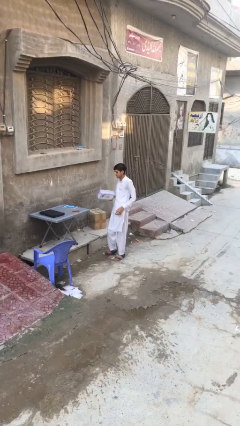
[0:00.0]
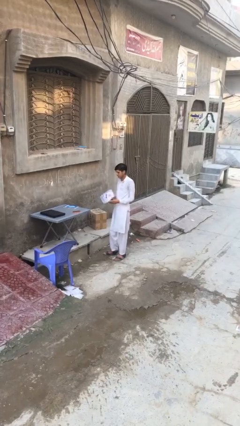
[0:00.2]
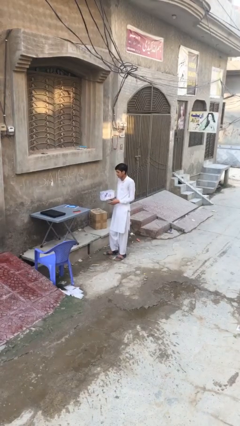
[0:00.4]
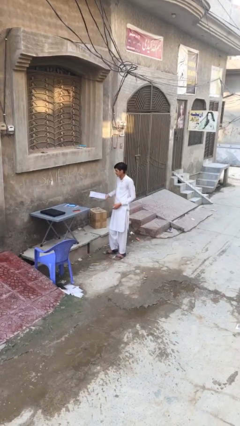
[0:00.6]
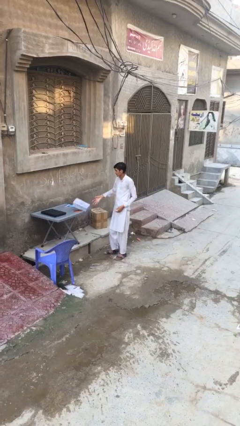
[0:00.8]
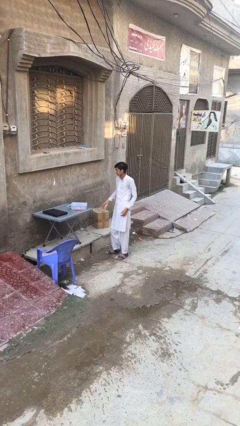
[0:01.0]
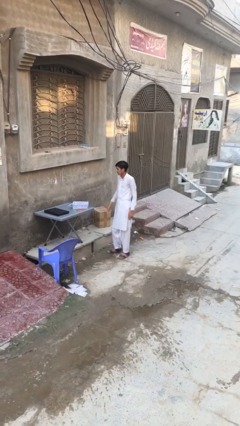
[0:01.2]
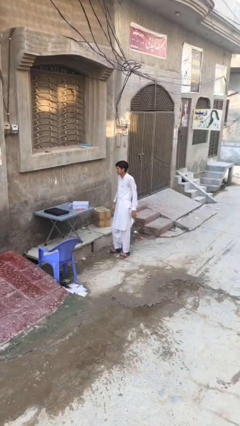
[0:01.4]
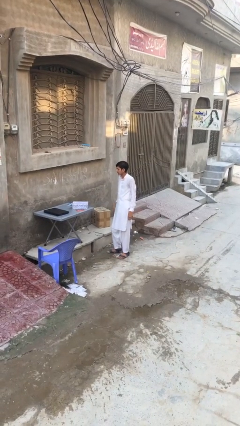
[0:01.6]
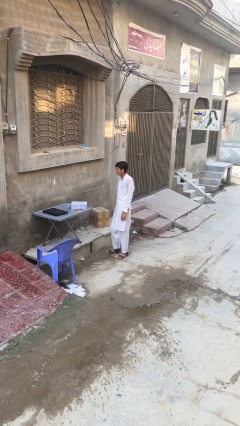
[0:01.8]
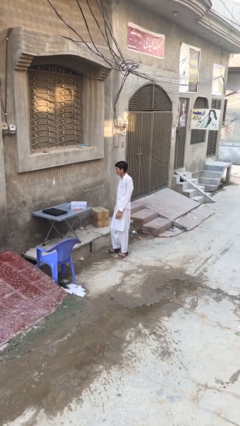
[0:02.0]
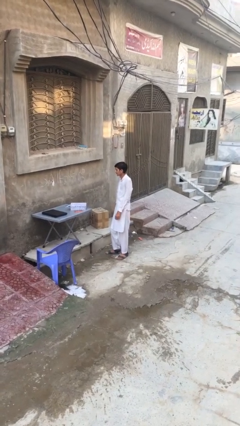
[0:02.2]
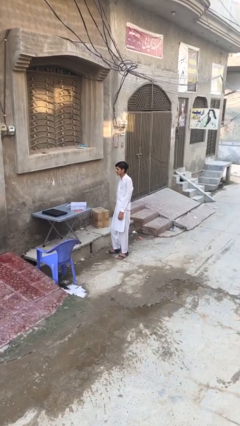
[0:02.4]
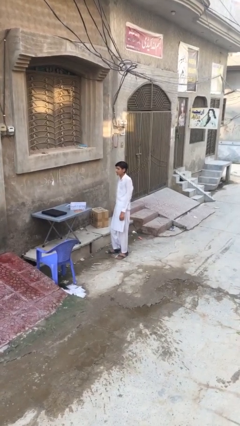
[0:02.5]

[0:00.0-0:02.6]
person puts down object on table

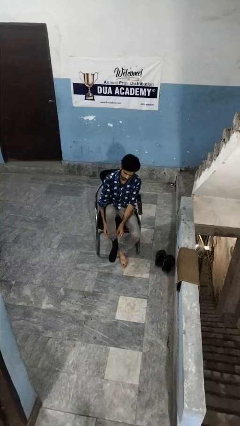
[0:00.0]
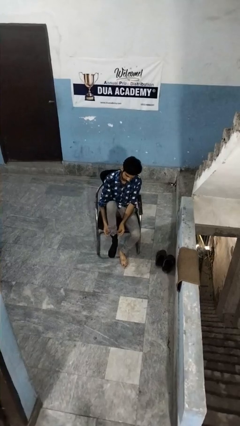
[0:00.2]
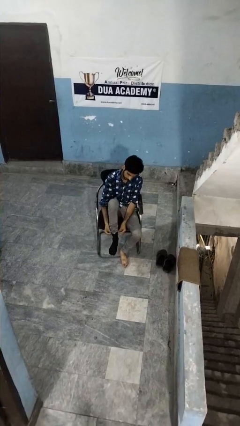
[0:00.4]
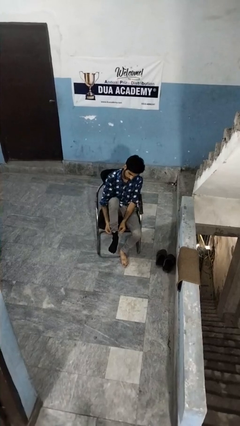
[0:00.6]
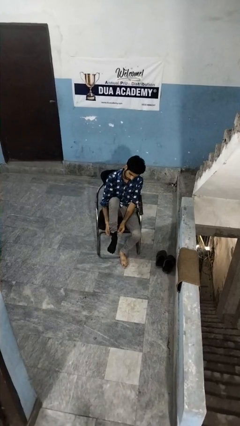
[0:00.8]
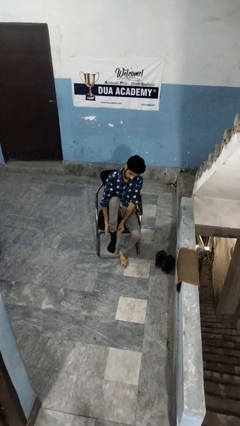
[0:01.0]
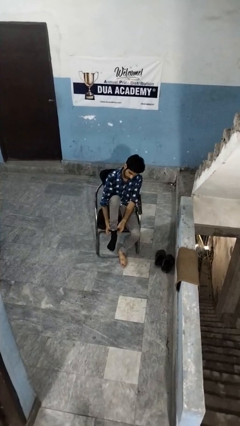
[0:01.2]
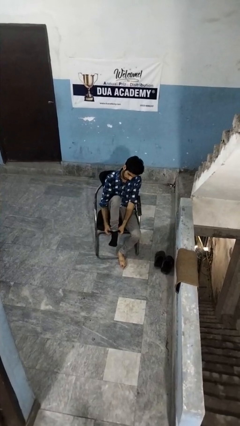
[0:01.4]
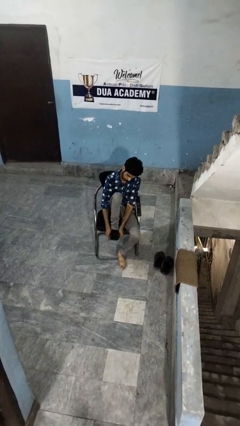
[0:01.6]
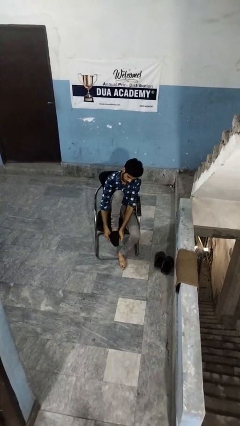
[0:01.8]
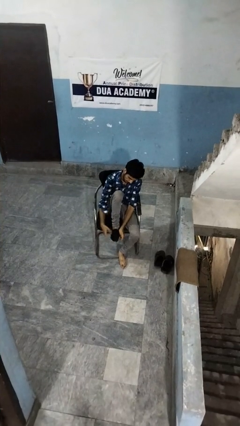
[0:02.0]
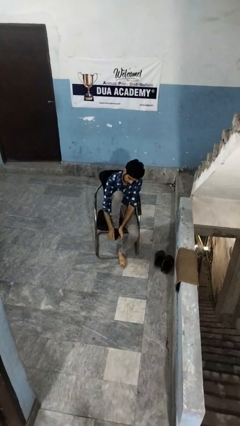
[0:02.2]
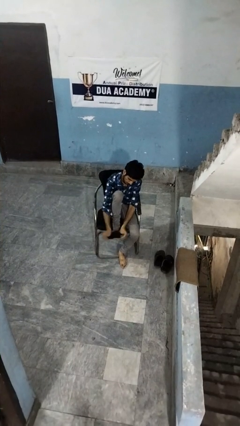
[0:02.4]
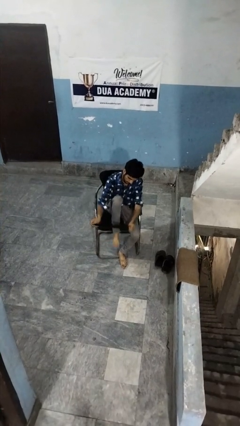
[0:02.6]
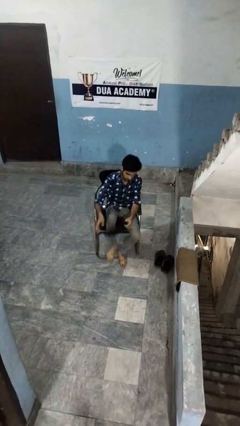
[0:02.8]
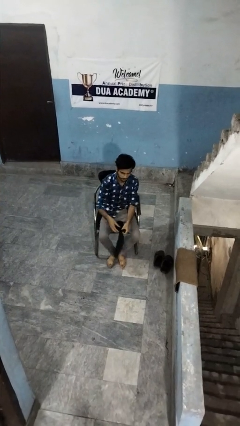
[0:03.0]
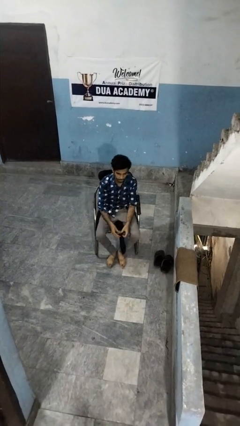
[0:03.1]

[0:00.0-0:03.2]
person takes off socks

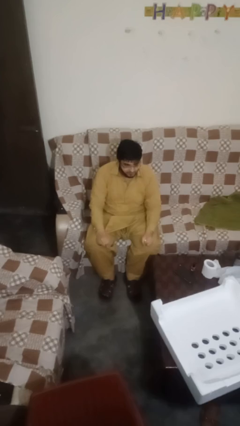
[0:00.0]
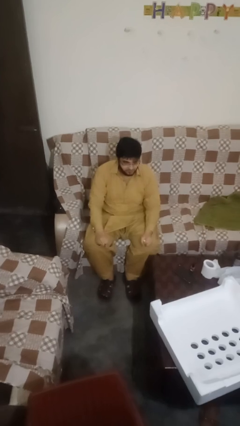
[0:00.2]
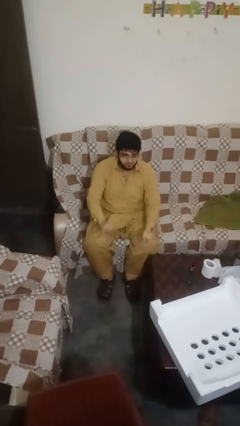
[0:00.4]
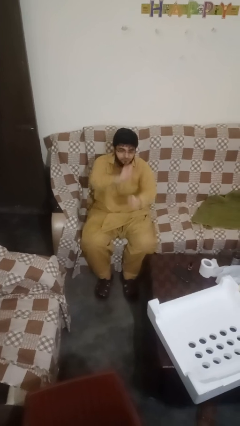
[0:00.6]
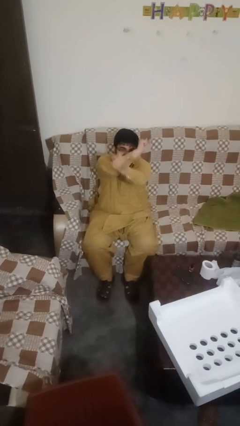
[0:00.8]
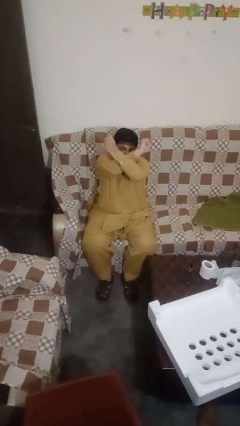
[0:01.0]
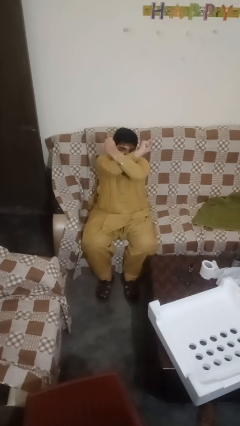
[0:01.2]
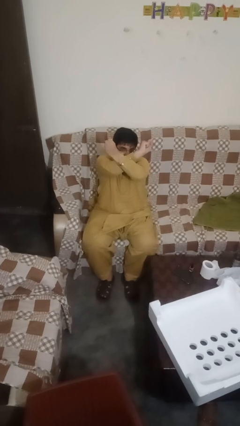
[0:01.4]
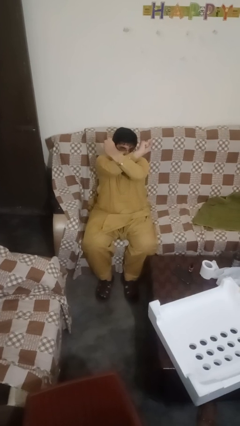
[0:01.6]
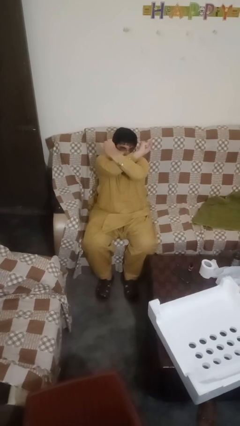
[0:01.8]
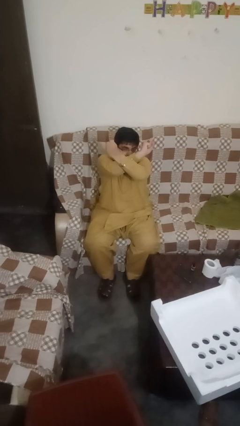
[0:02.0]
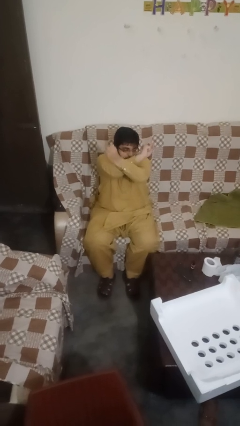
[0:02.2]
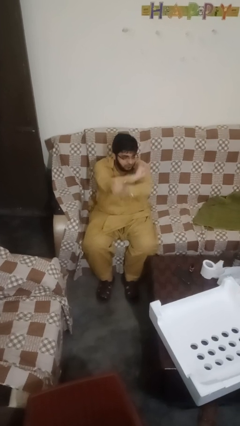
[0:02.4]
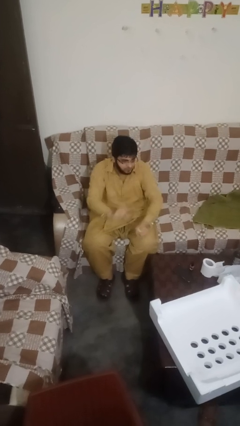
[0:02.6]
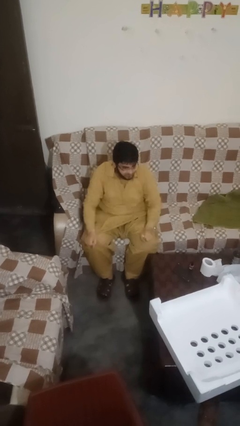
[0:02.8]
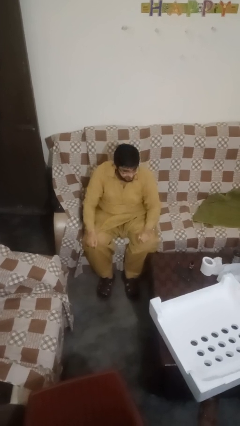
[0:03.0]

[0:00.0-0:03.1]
person gestures arms x

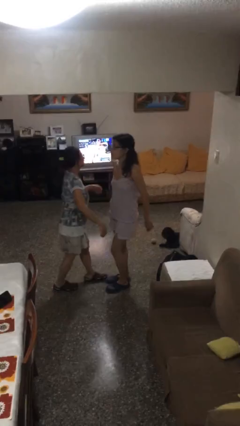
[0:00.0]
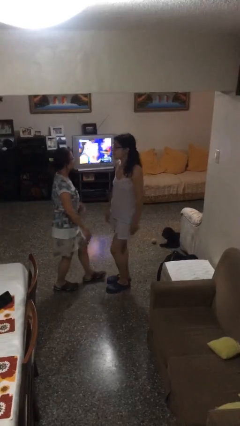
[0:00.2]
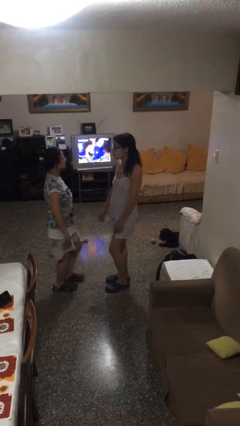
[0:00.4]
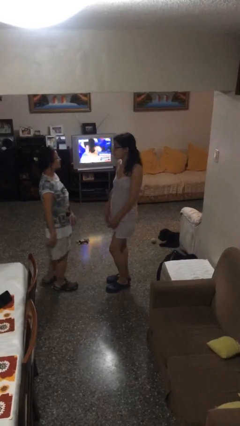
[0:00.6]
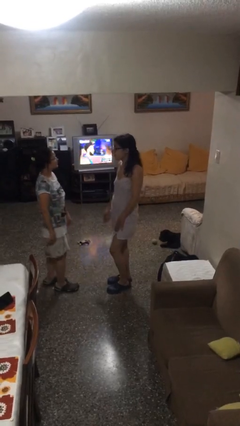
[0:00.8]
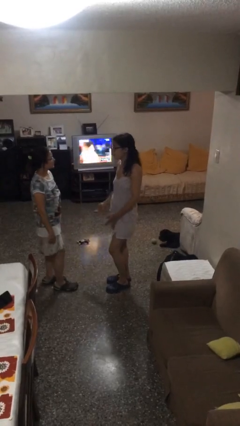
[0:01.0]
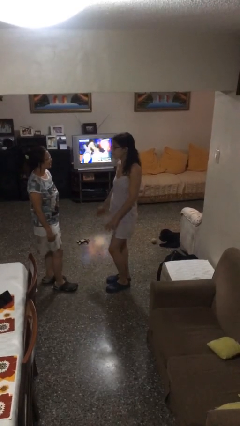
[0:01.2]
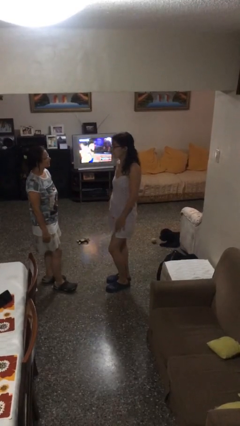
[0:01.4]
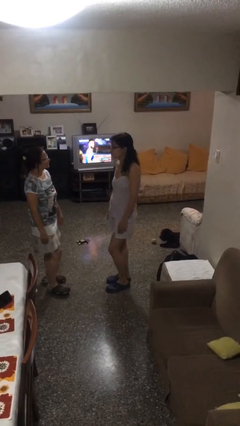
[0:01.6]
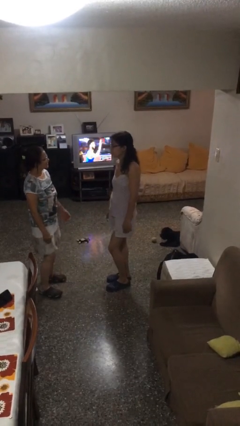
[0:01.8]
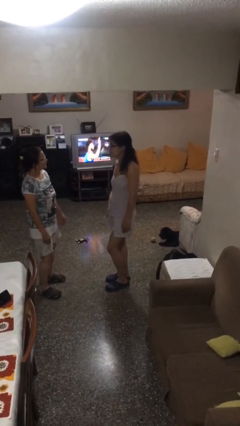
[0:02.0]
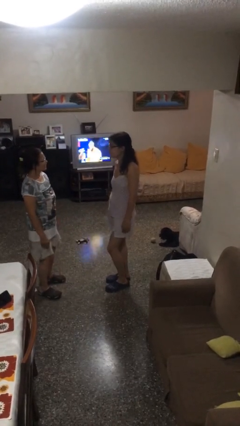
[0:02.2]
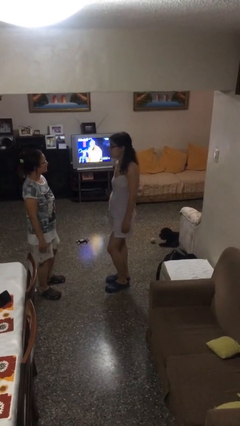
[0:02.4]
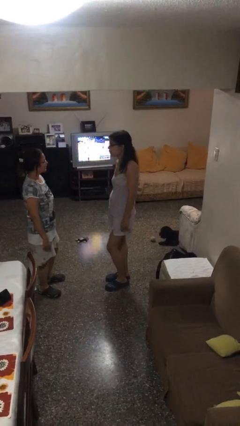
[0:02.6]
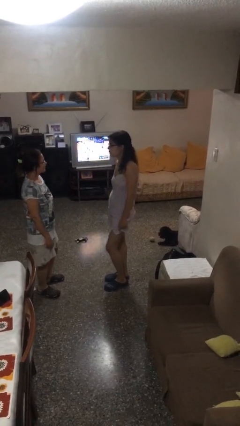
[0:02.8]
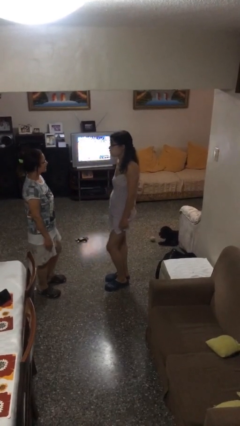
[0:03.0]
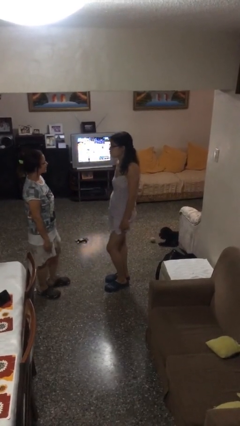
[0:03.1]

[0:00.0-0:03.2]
person talks to person

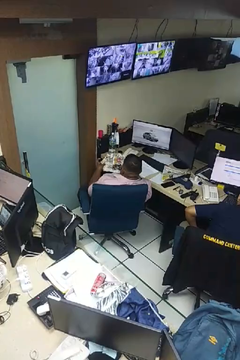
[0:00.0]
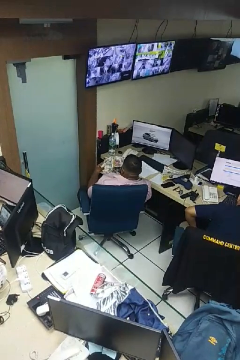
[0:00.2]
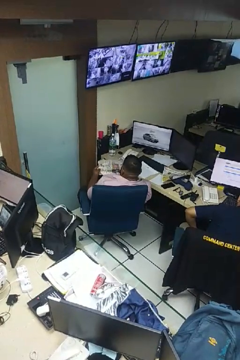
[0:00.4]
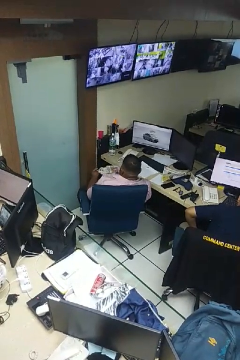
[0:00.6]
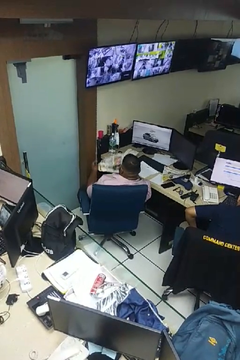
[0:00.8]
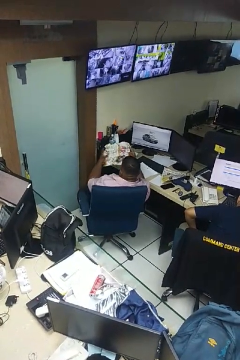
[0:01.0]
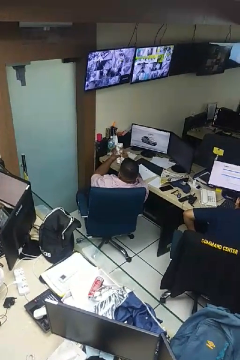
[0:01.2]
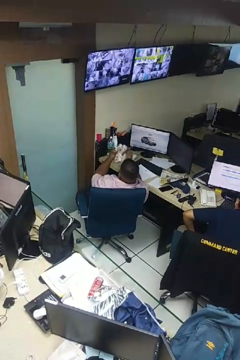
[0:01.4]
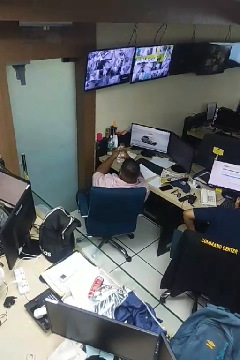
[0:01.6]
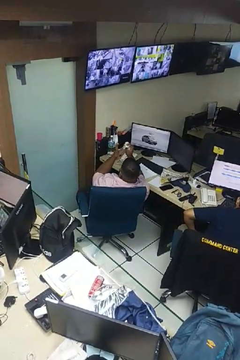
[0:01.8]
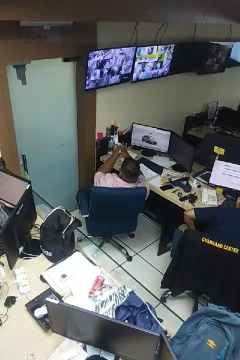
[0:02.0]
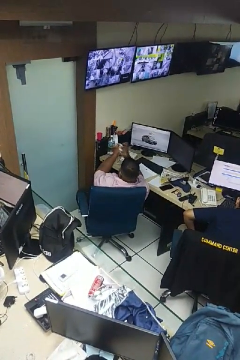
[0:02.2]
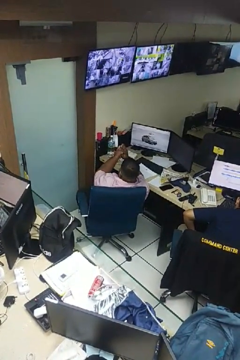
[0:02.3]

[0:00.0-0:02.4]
person crumples paper

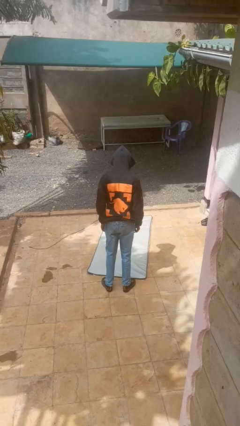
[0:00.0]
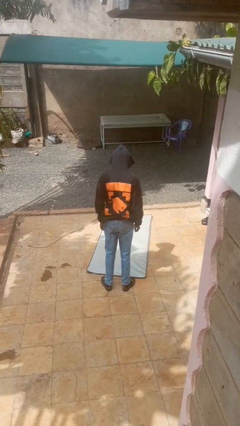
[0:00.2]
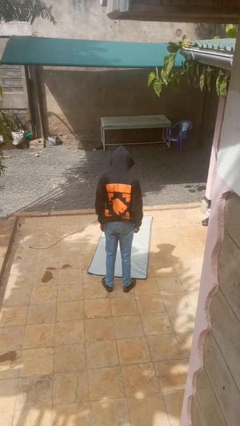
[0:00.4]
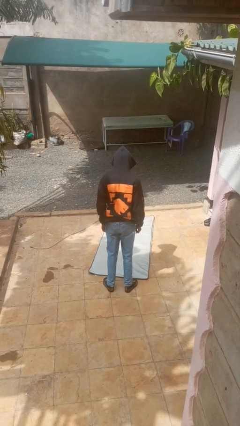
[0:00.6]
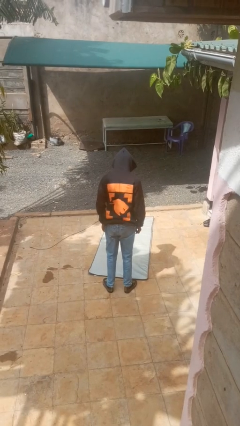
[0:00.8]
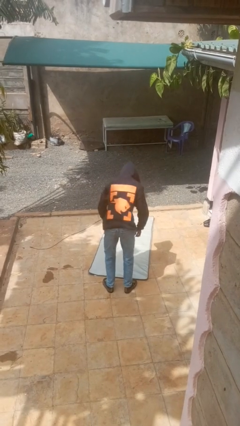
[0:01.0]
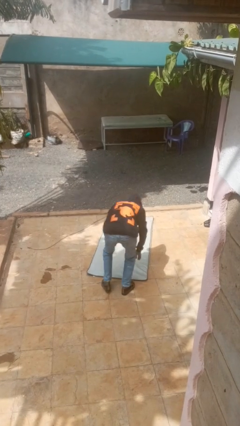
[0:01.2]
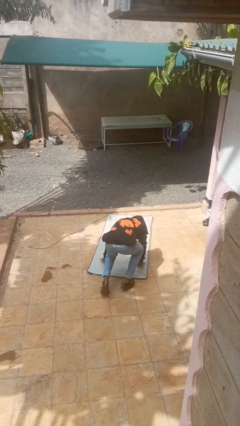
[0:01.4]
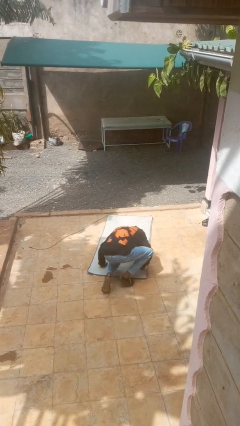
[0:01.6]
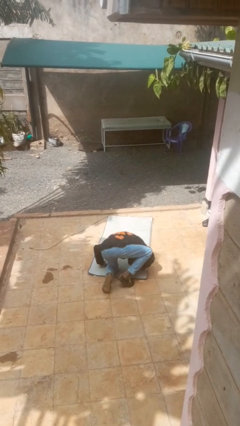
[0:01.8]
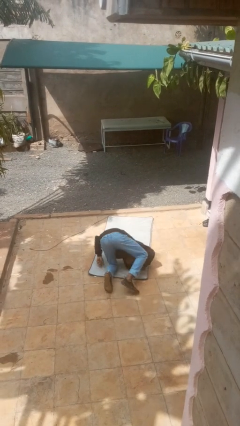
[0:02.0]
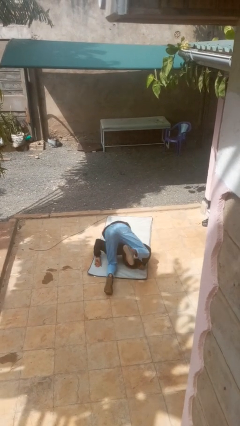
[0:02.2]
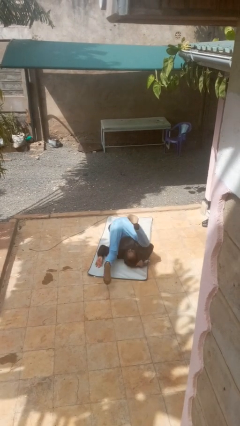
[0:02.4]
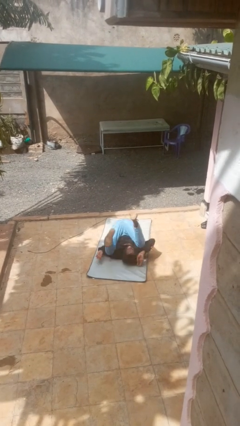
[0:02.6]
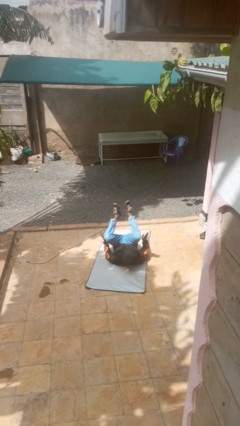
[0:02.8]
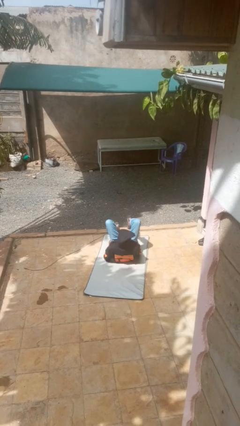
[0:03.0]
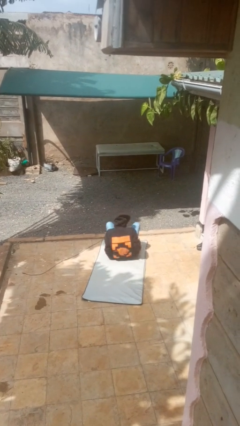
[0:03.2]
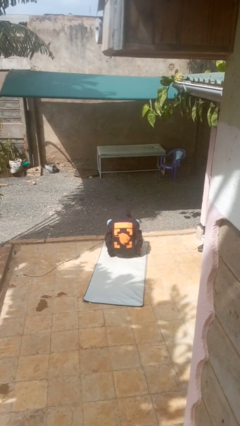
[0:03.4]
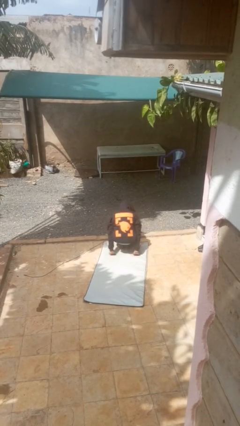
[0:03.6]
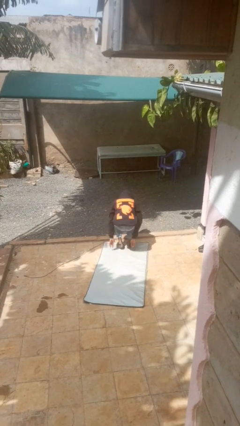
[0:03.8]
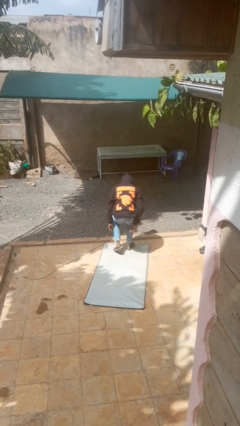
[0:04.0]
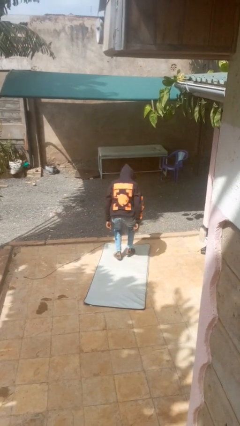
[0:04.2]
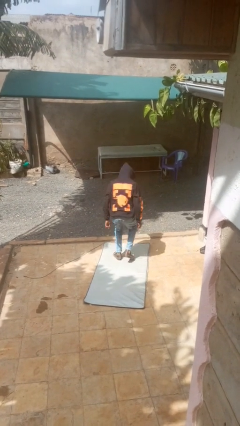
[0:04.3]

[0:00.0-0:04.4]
person somersaults
